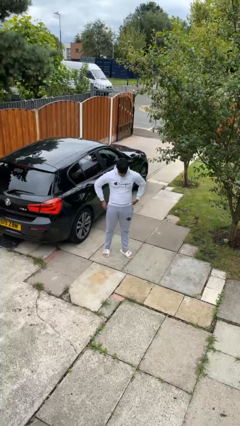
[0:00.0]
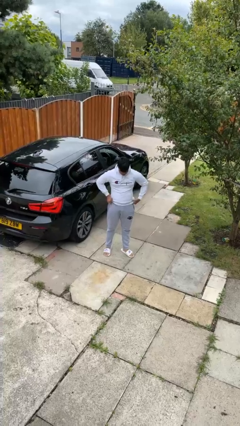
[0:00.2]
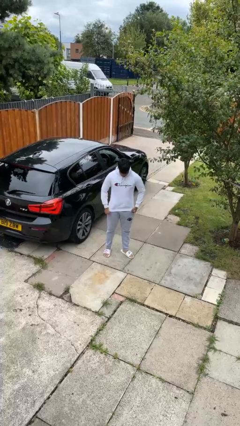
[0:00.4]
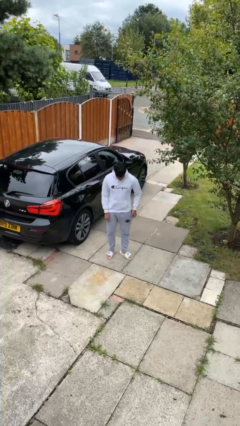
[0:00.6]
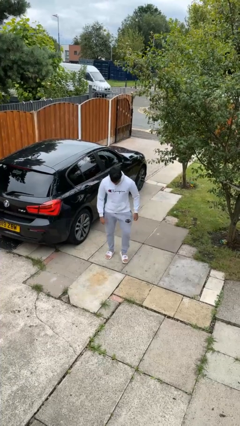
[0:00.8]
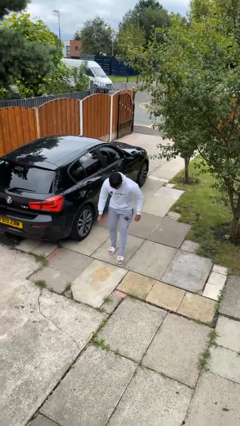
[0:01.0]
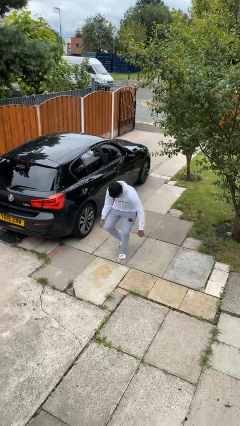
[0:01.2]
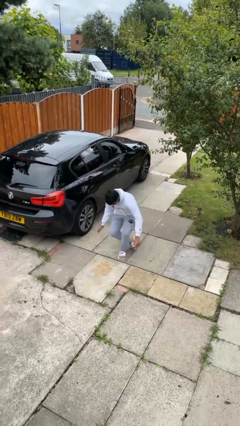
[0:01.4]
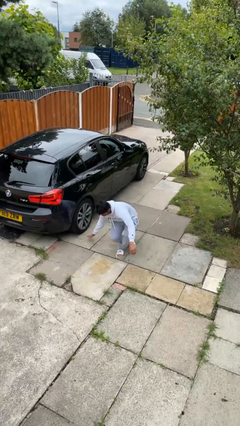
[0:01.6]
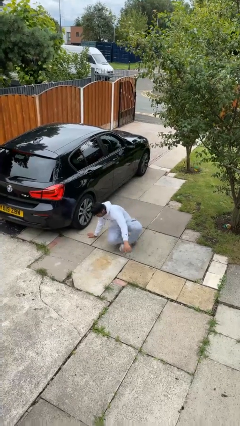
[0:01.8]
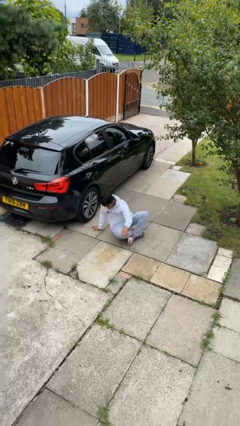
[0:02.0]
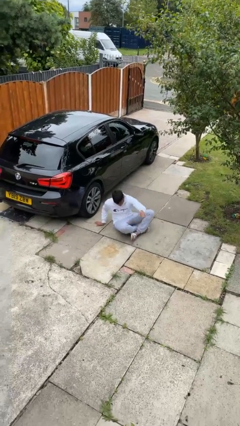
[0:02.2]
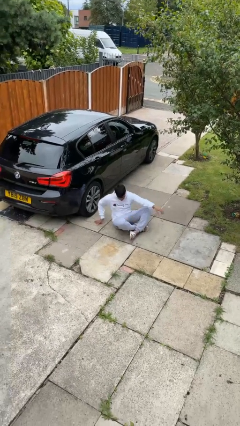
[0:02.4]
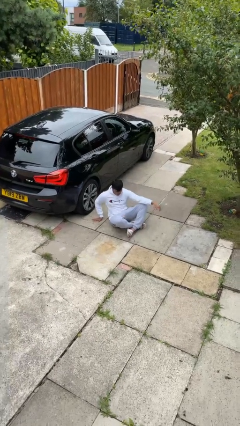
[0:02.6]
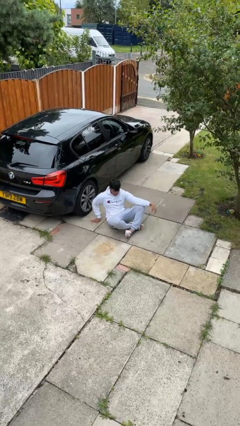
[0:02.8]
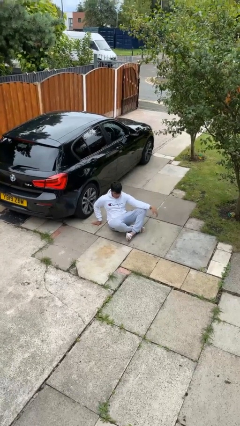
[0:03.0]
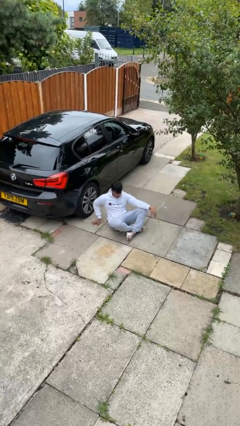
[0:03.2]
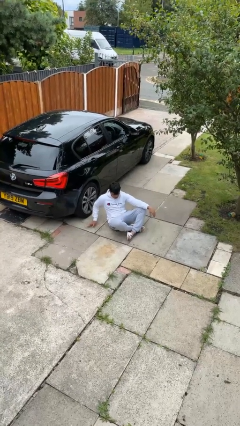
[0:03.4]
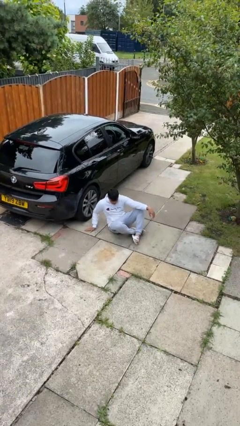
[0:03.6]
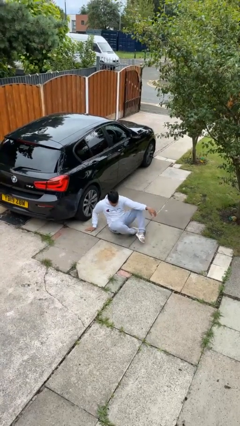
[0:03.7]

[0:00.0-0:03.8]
person sits crisscross

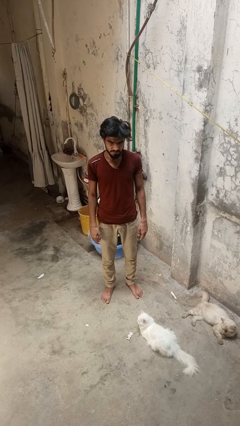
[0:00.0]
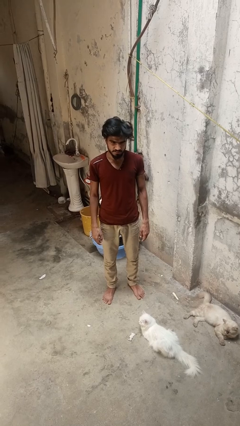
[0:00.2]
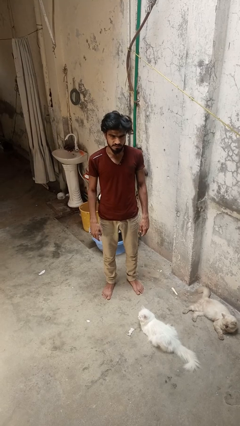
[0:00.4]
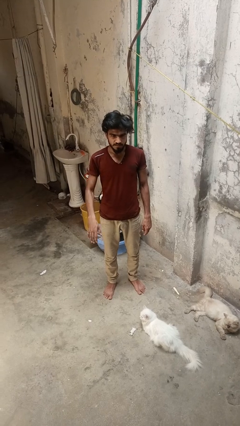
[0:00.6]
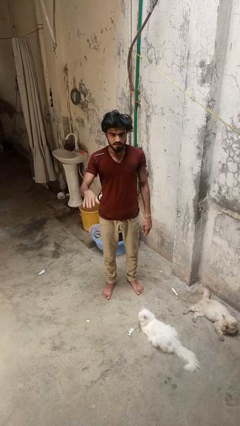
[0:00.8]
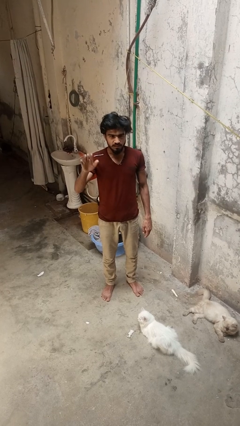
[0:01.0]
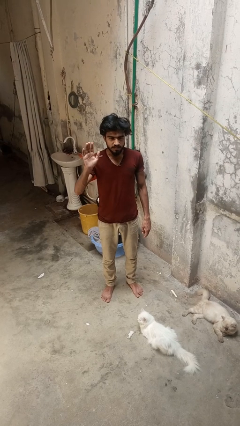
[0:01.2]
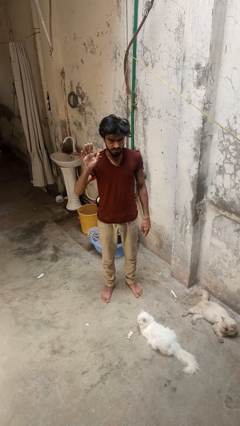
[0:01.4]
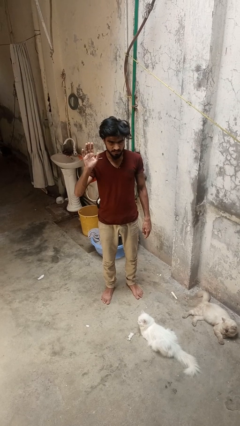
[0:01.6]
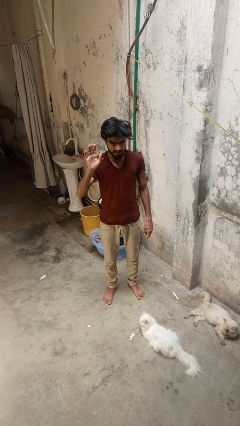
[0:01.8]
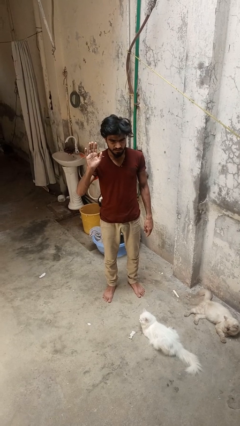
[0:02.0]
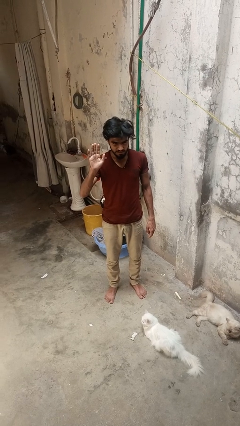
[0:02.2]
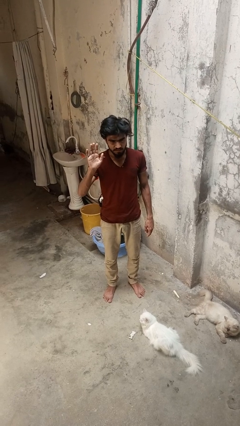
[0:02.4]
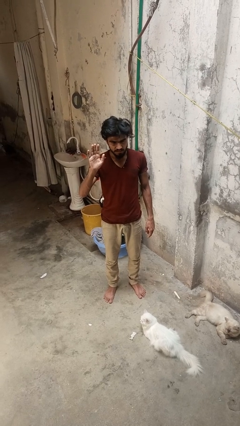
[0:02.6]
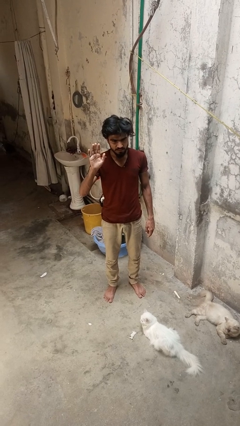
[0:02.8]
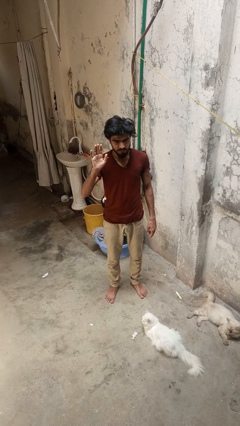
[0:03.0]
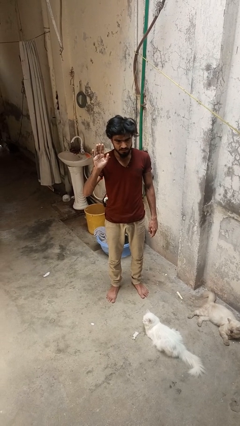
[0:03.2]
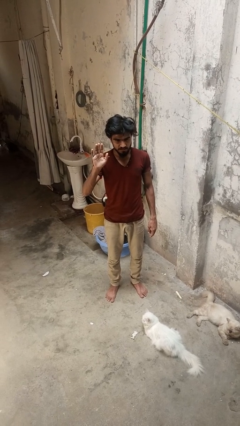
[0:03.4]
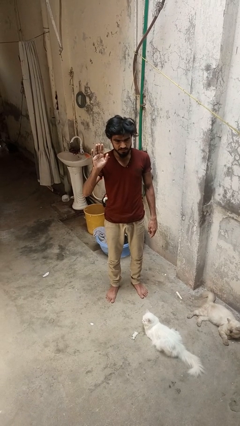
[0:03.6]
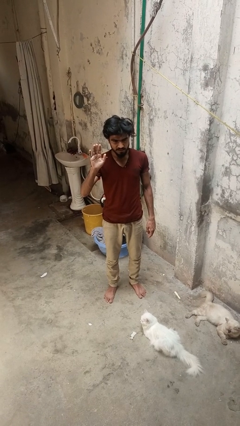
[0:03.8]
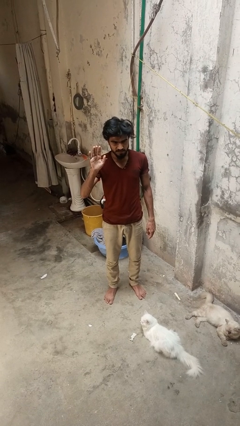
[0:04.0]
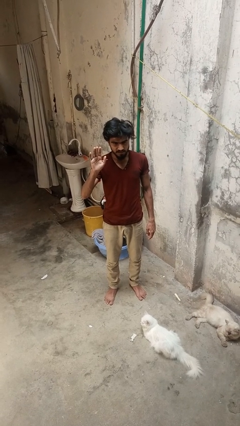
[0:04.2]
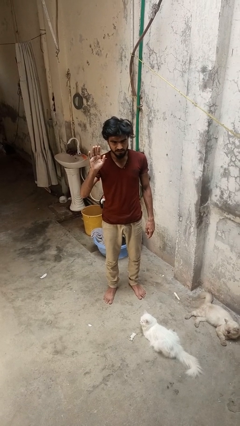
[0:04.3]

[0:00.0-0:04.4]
person gestures raise hand

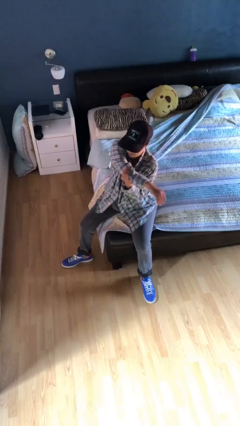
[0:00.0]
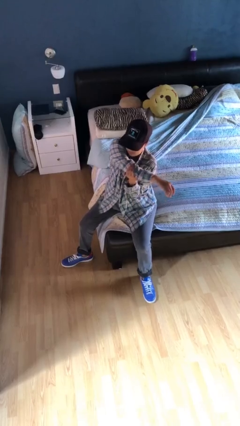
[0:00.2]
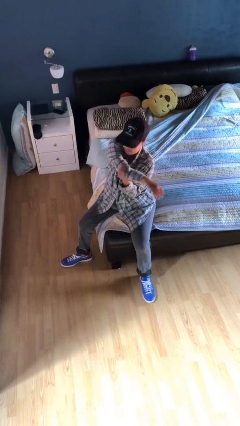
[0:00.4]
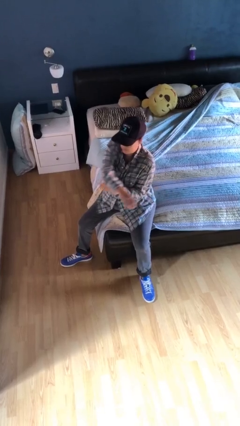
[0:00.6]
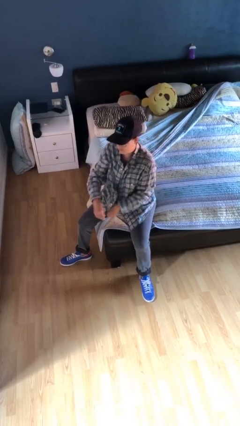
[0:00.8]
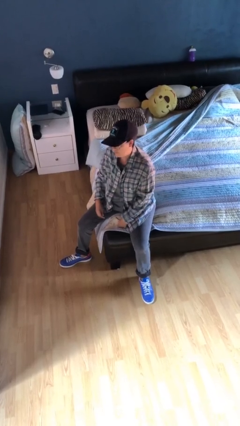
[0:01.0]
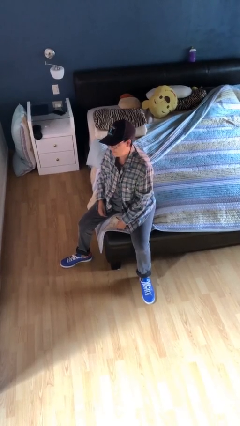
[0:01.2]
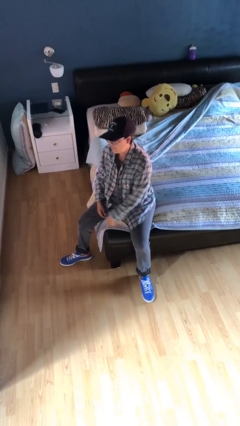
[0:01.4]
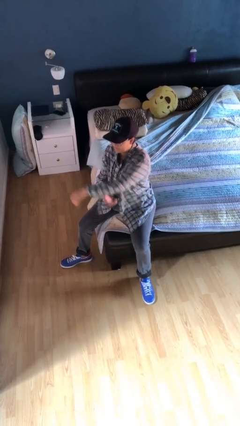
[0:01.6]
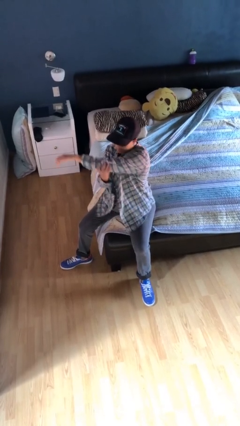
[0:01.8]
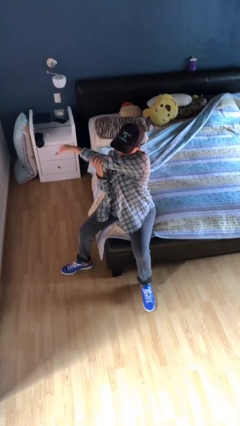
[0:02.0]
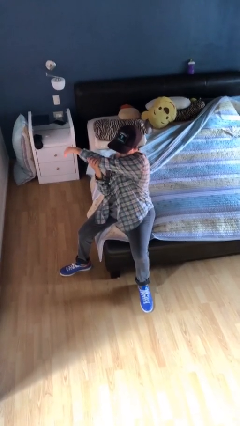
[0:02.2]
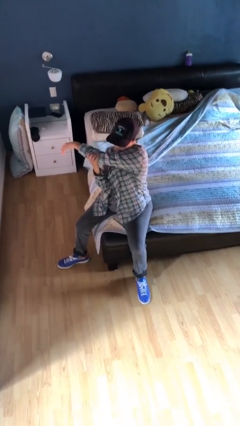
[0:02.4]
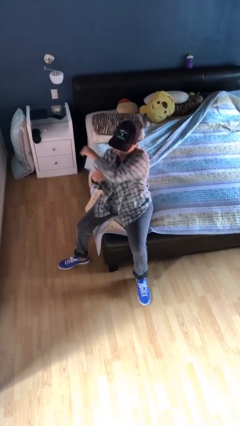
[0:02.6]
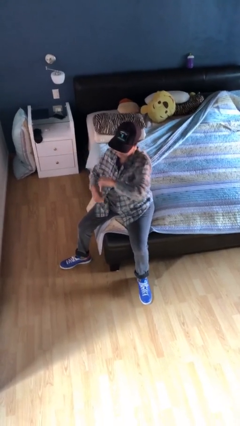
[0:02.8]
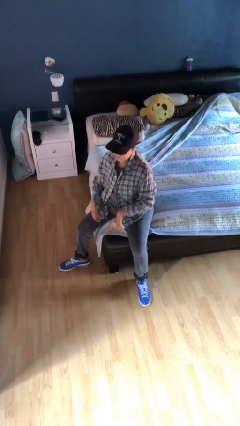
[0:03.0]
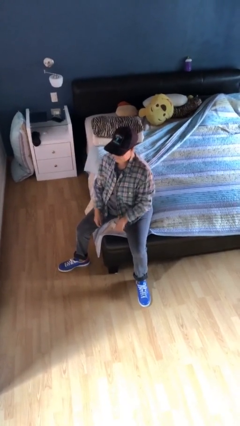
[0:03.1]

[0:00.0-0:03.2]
person stretches arms to side

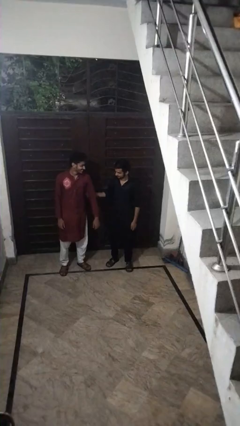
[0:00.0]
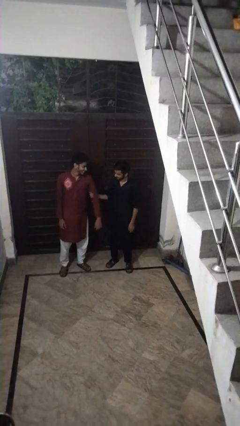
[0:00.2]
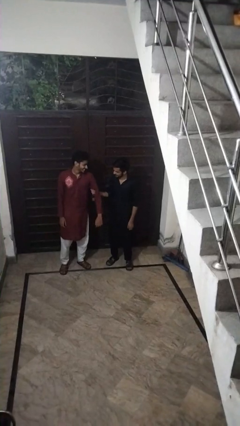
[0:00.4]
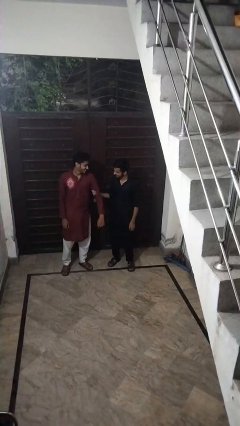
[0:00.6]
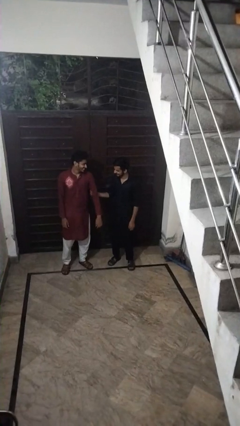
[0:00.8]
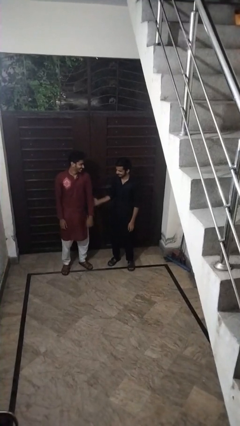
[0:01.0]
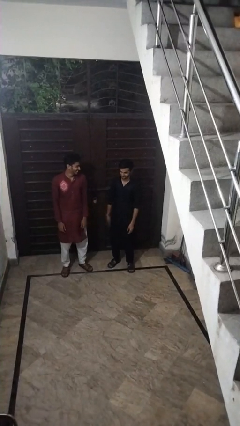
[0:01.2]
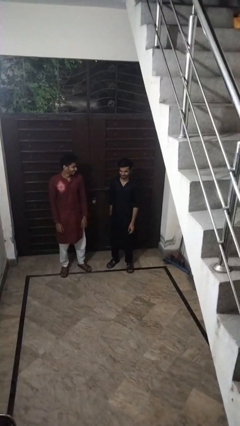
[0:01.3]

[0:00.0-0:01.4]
person grabs person by bicep

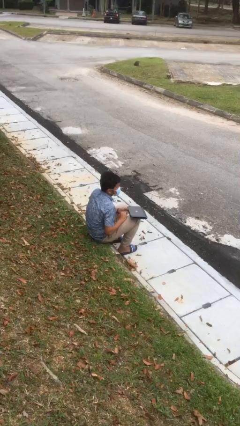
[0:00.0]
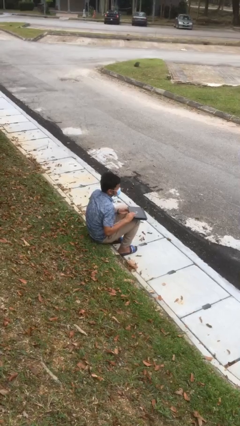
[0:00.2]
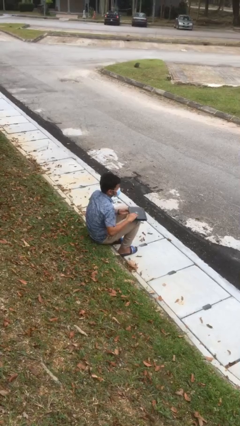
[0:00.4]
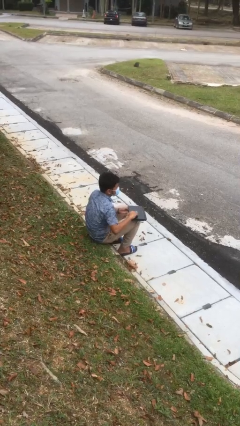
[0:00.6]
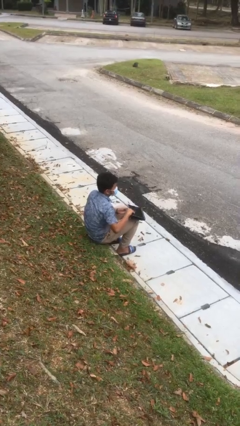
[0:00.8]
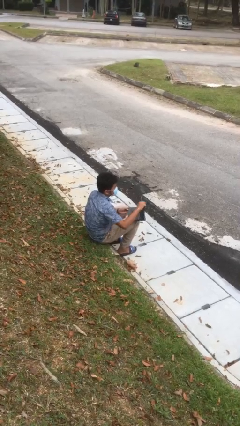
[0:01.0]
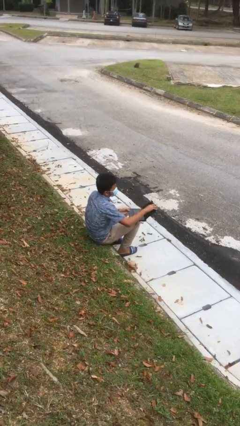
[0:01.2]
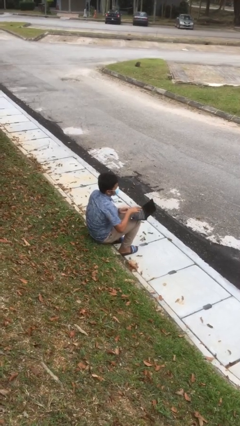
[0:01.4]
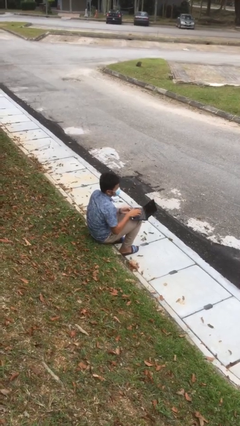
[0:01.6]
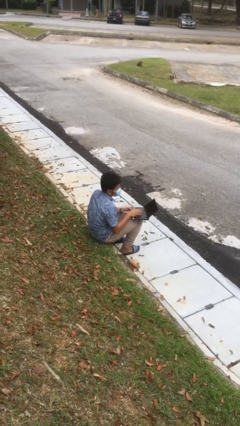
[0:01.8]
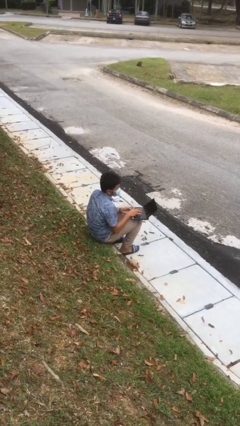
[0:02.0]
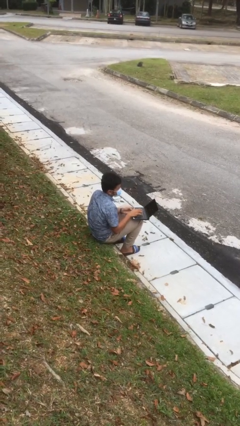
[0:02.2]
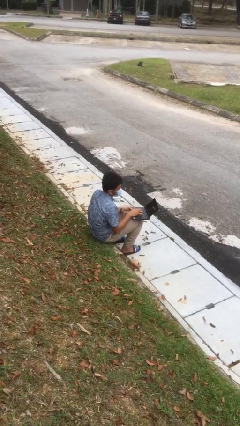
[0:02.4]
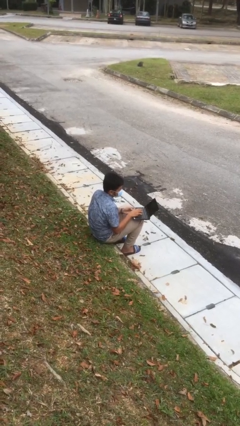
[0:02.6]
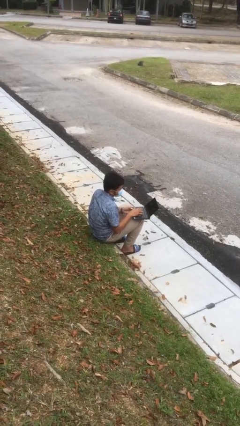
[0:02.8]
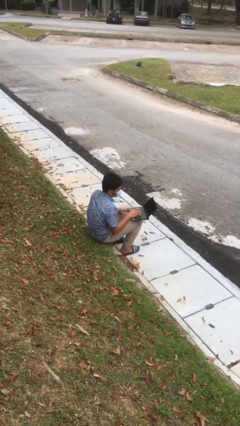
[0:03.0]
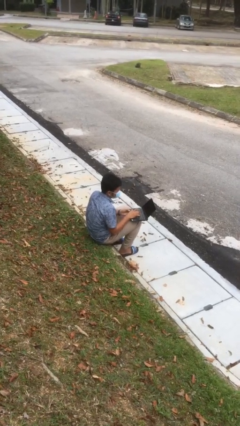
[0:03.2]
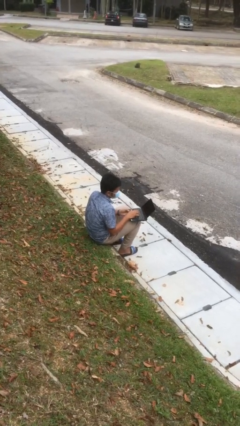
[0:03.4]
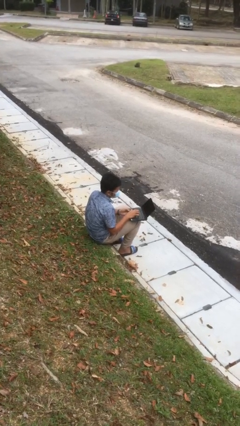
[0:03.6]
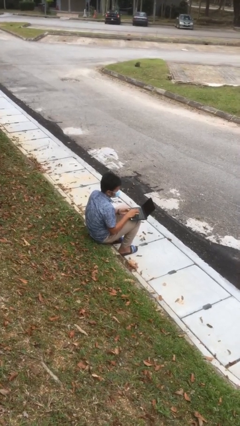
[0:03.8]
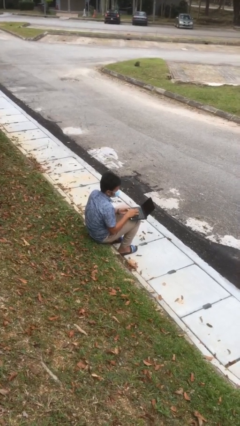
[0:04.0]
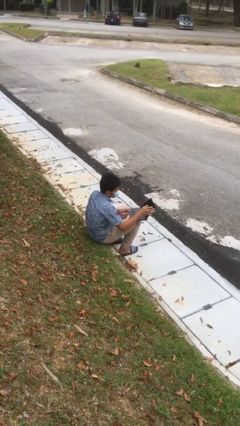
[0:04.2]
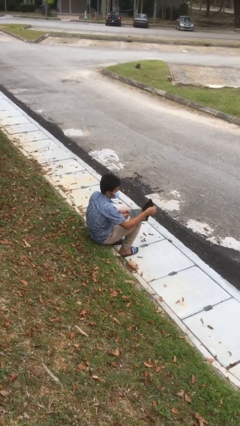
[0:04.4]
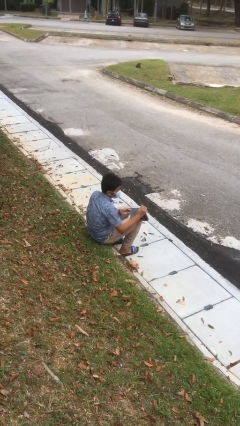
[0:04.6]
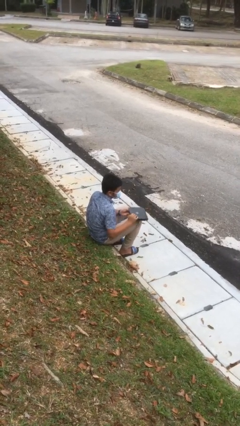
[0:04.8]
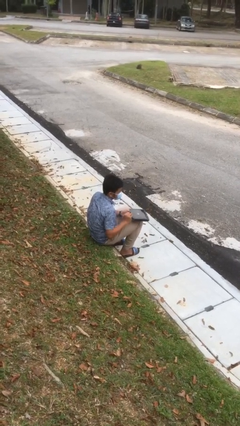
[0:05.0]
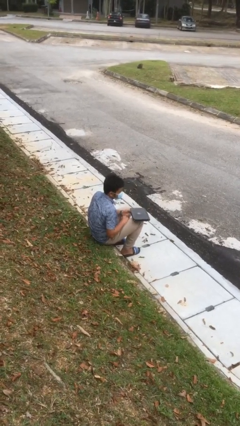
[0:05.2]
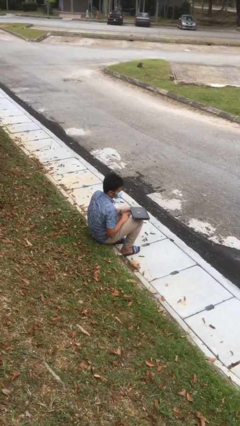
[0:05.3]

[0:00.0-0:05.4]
person interacts with laptop
